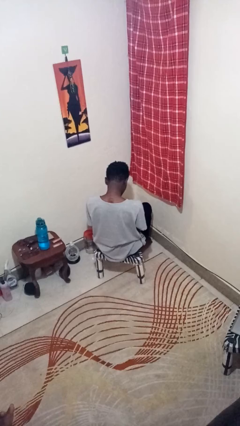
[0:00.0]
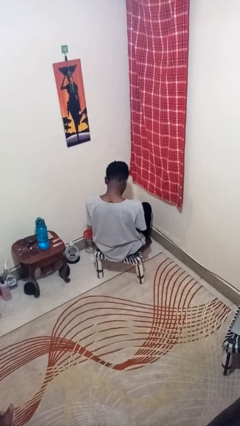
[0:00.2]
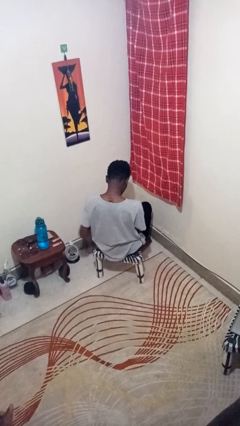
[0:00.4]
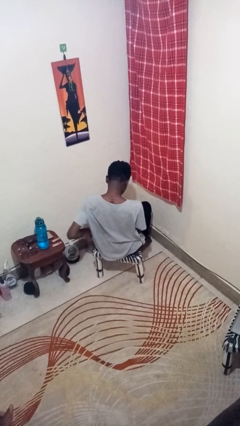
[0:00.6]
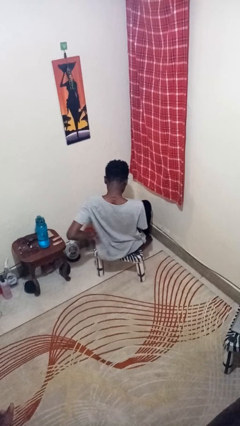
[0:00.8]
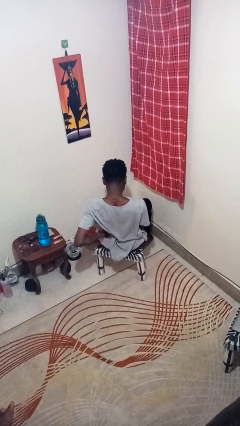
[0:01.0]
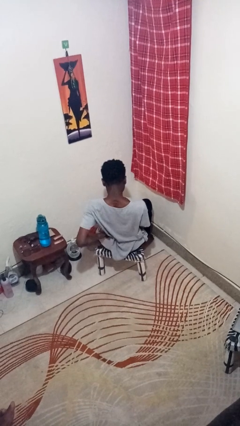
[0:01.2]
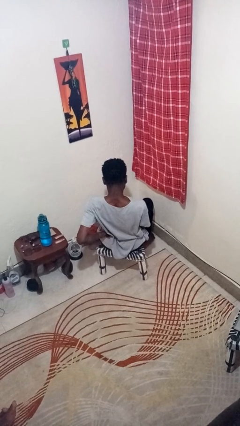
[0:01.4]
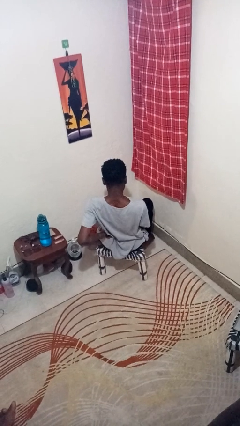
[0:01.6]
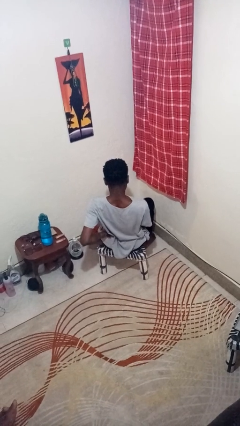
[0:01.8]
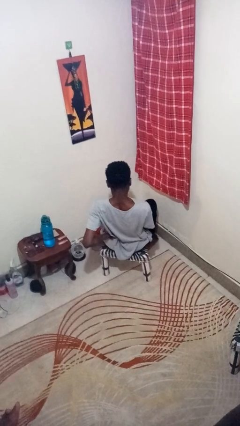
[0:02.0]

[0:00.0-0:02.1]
person stretches back

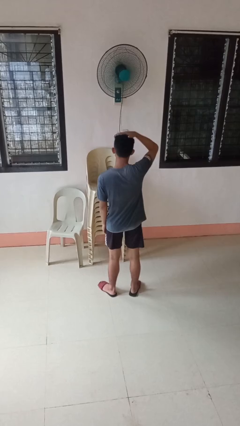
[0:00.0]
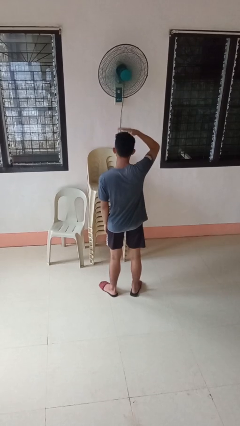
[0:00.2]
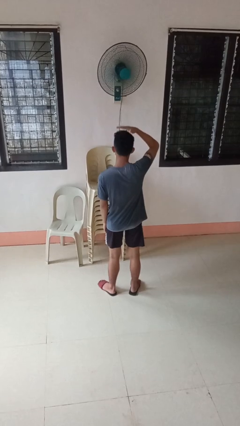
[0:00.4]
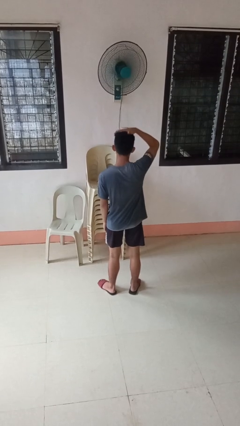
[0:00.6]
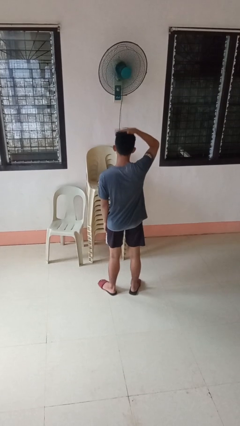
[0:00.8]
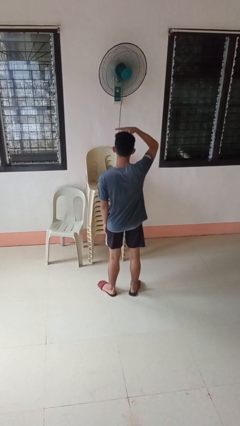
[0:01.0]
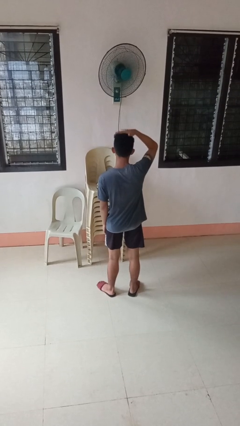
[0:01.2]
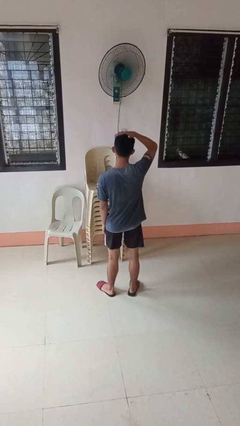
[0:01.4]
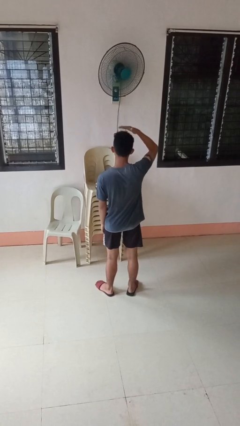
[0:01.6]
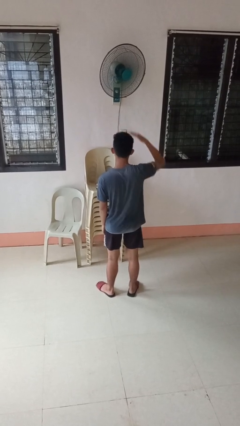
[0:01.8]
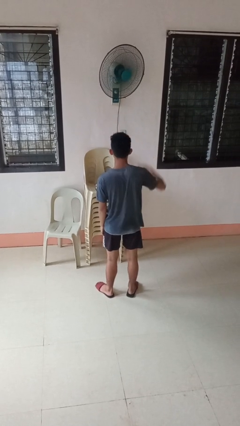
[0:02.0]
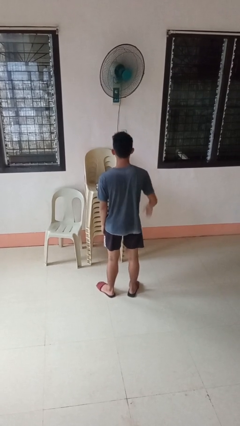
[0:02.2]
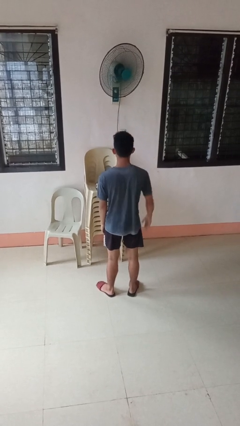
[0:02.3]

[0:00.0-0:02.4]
person pats head

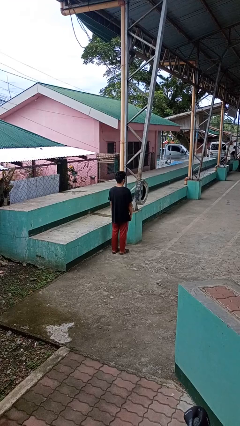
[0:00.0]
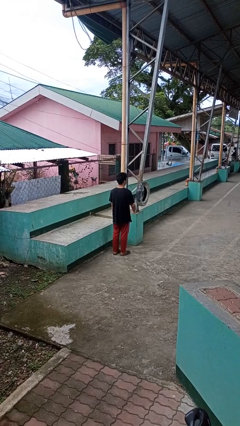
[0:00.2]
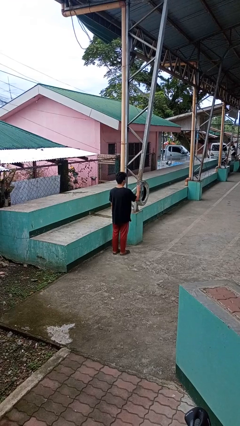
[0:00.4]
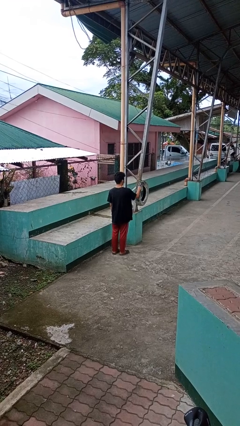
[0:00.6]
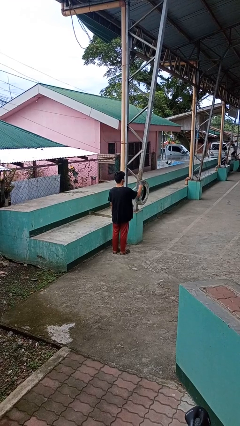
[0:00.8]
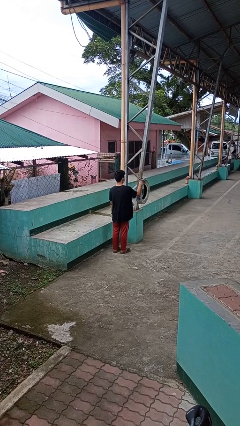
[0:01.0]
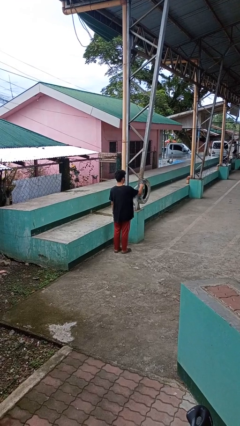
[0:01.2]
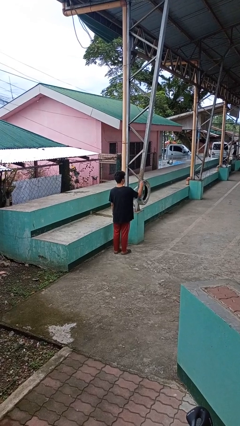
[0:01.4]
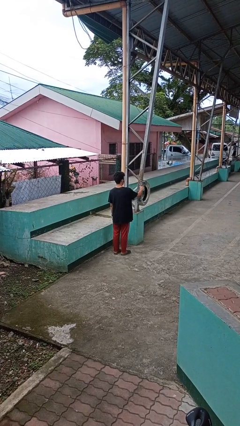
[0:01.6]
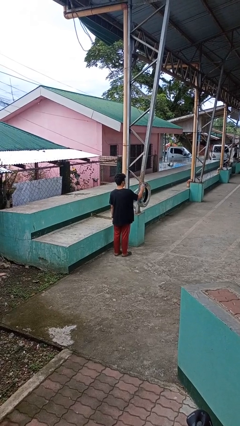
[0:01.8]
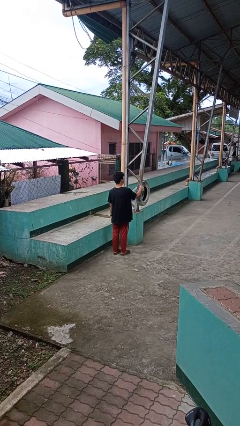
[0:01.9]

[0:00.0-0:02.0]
person taps object with finger

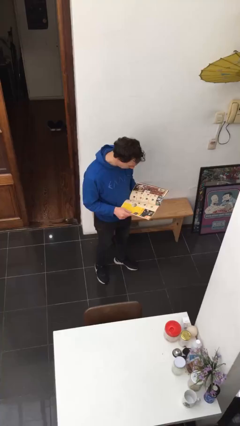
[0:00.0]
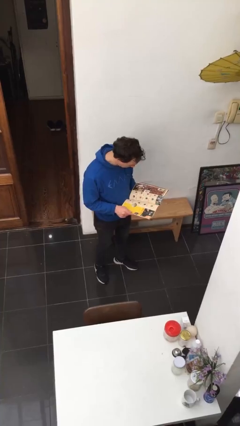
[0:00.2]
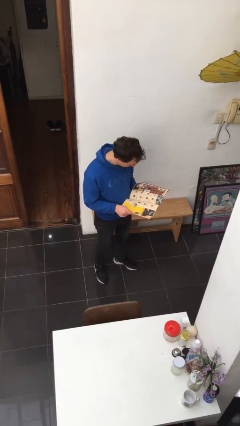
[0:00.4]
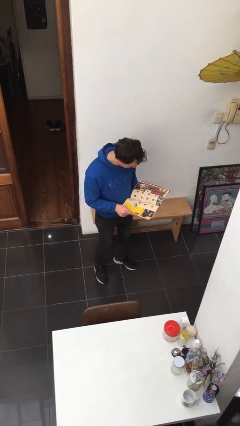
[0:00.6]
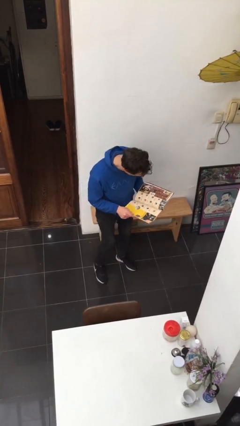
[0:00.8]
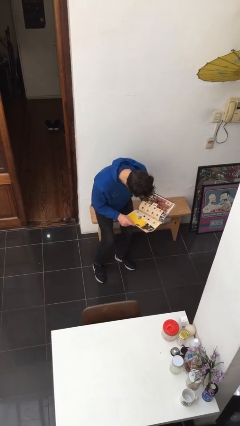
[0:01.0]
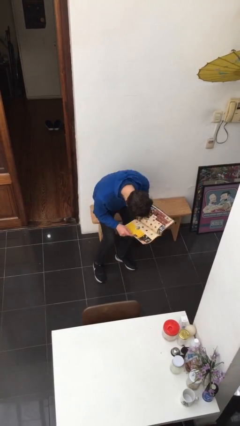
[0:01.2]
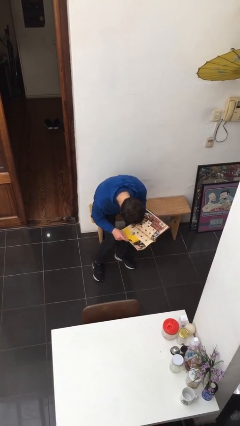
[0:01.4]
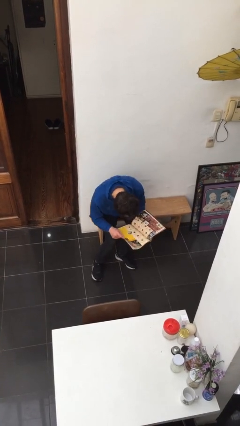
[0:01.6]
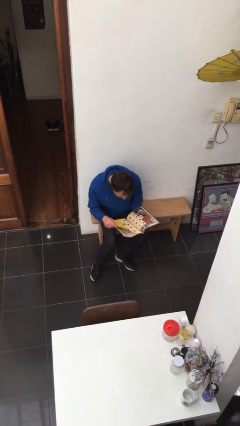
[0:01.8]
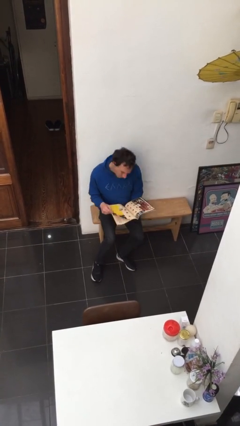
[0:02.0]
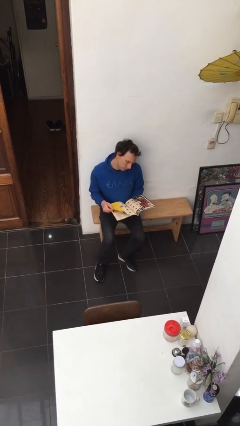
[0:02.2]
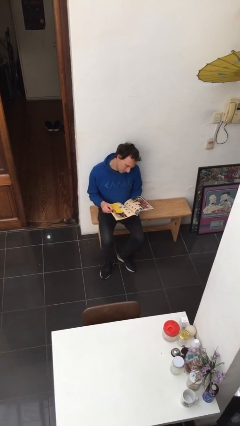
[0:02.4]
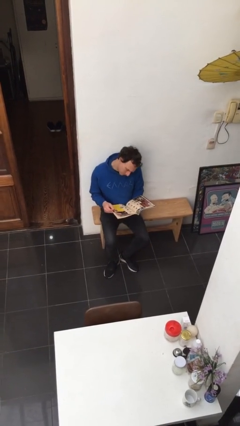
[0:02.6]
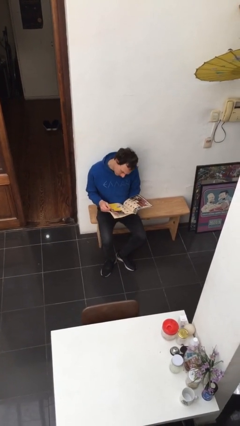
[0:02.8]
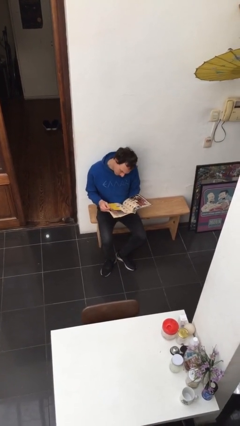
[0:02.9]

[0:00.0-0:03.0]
person sits down

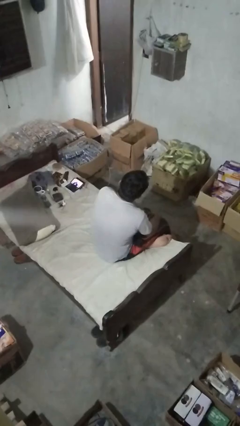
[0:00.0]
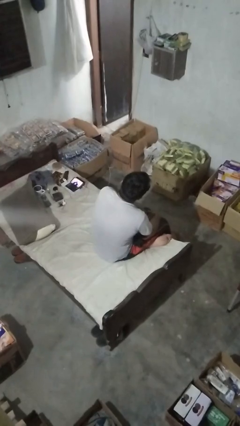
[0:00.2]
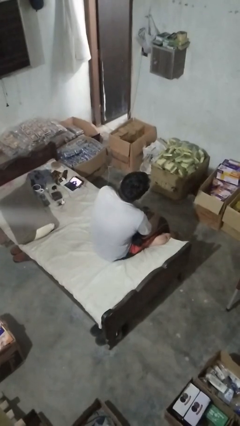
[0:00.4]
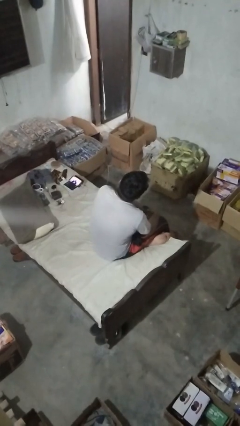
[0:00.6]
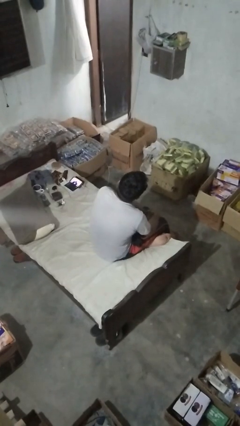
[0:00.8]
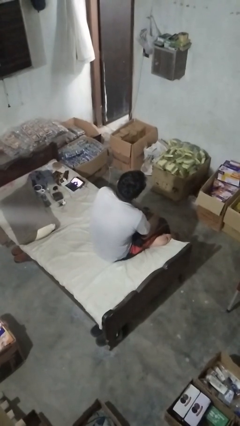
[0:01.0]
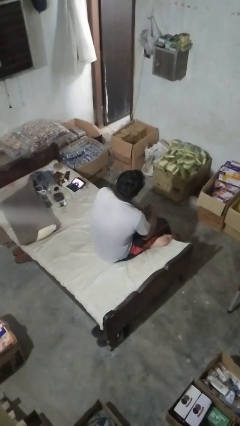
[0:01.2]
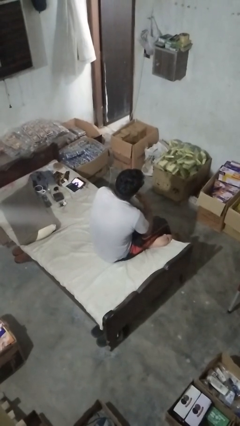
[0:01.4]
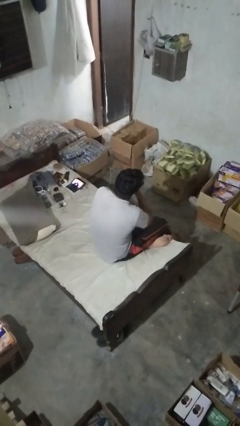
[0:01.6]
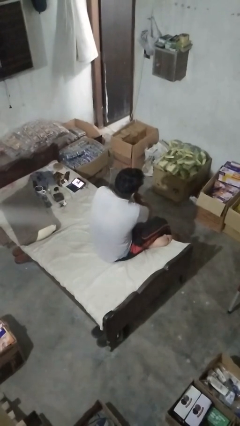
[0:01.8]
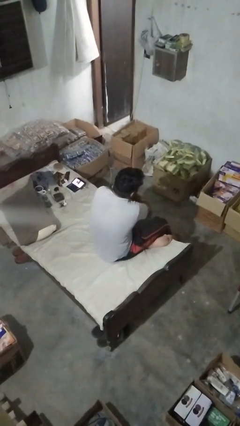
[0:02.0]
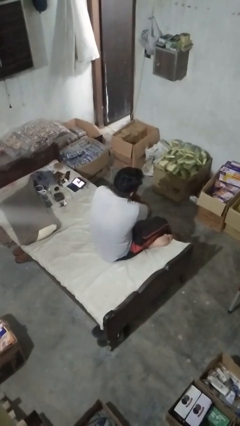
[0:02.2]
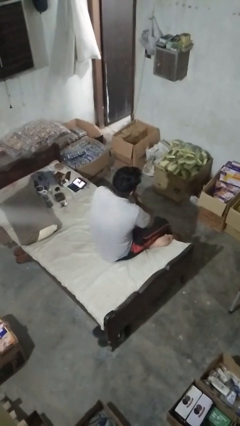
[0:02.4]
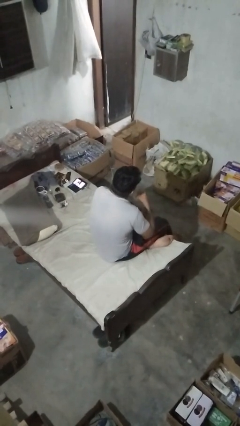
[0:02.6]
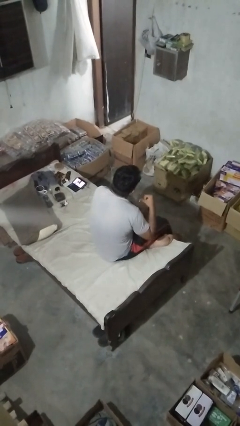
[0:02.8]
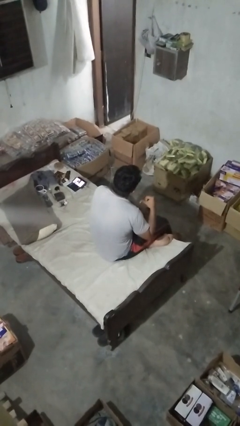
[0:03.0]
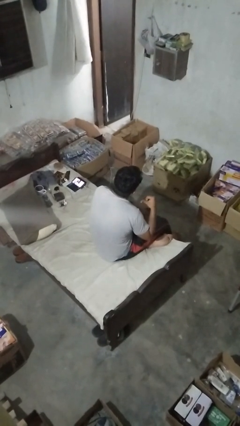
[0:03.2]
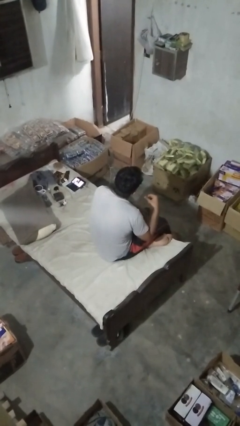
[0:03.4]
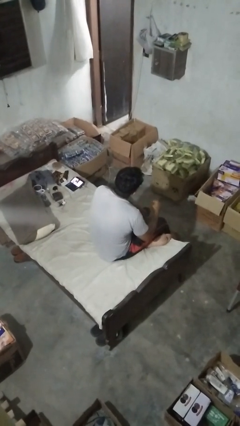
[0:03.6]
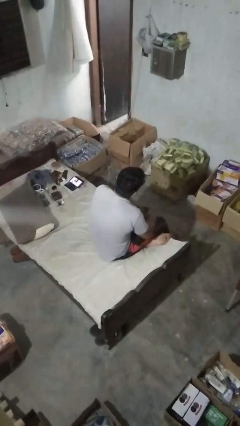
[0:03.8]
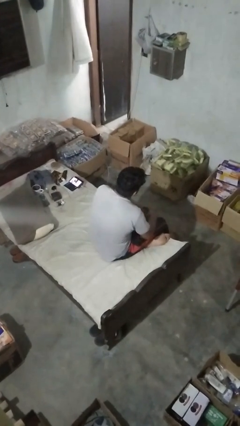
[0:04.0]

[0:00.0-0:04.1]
person gestures cut

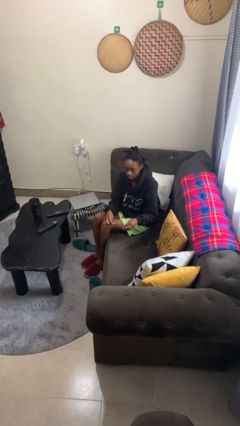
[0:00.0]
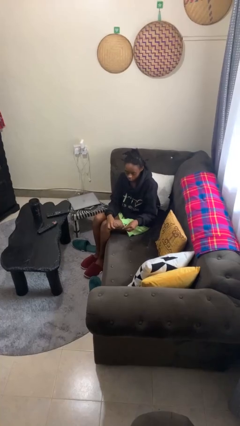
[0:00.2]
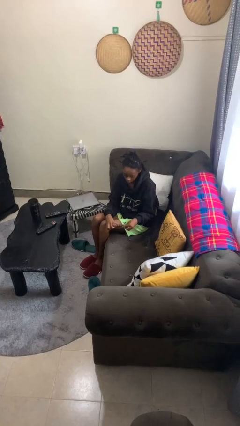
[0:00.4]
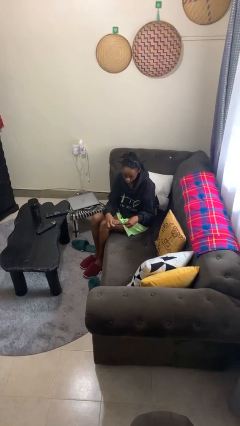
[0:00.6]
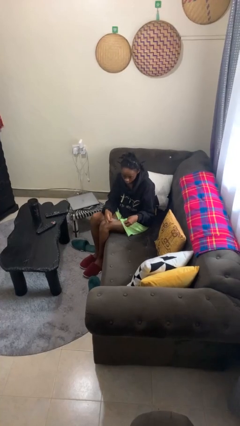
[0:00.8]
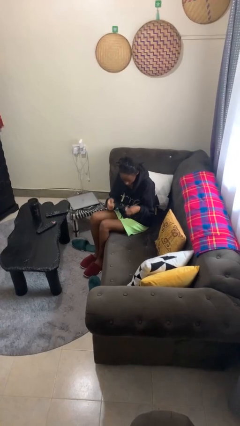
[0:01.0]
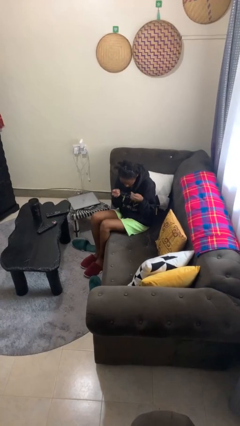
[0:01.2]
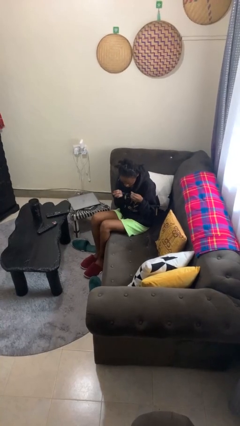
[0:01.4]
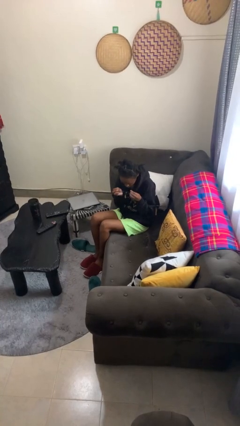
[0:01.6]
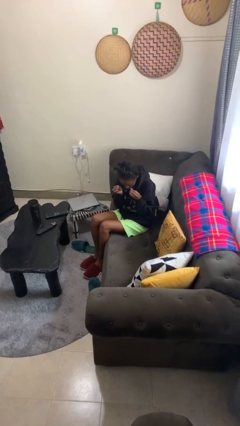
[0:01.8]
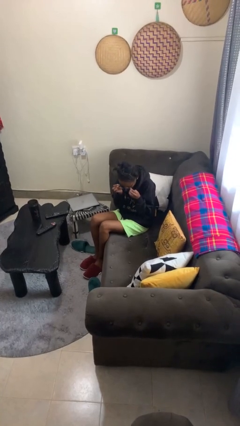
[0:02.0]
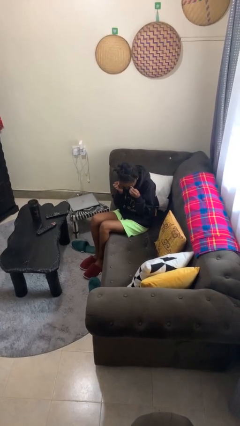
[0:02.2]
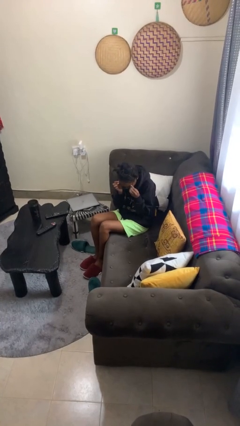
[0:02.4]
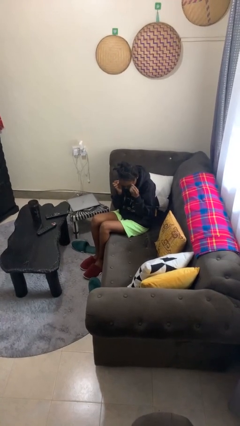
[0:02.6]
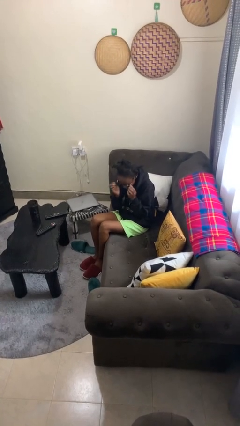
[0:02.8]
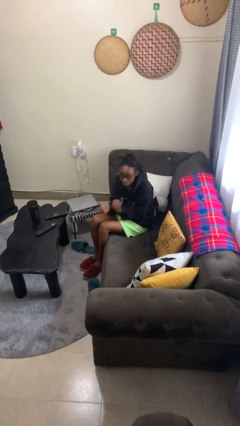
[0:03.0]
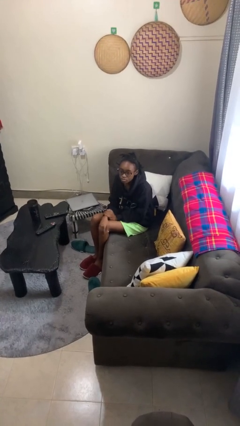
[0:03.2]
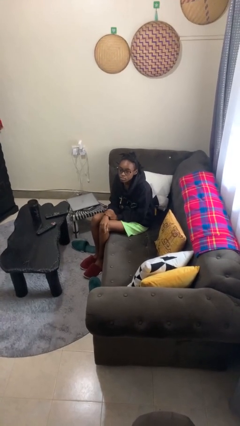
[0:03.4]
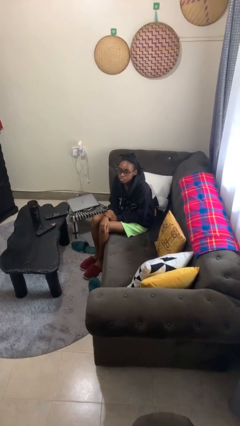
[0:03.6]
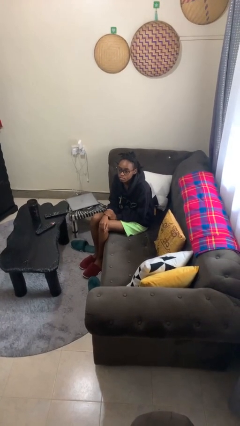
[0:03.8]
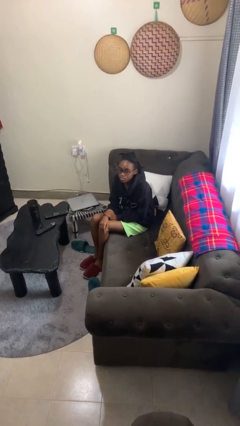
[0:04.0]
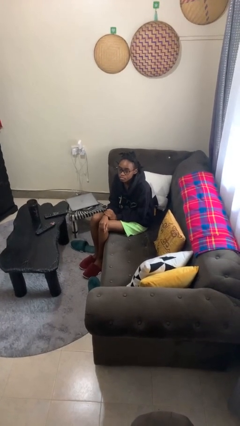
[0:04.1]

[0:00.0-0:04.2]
person puts on glasses
